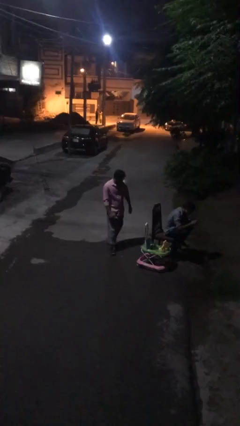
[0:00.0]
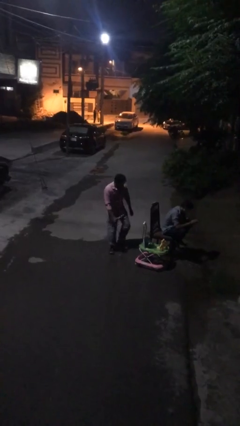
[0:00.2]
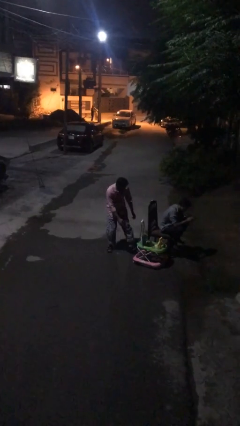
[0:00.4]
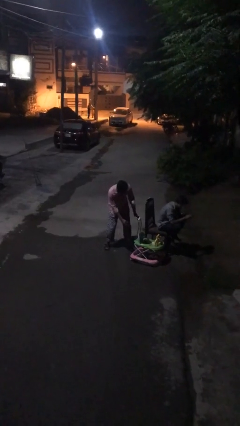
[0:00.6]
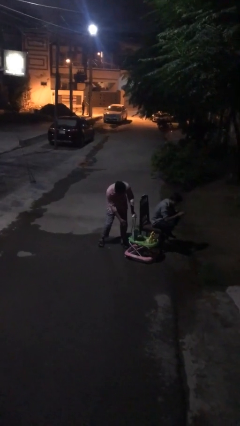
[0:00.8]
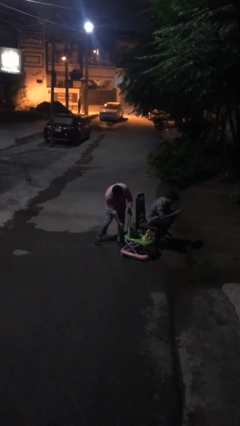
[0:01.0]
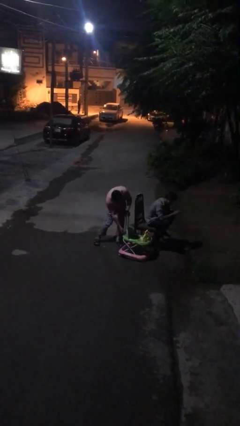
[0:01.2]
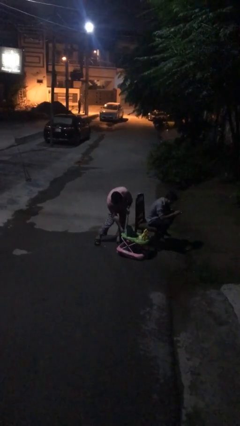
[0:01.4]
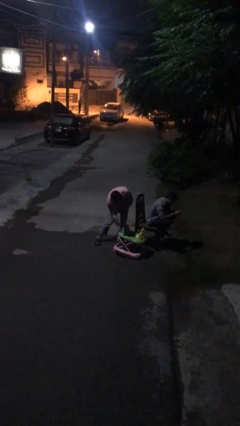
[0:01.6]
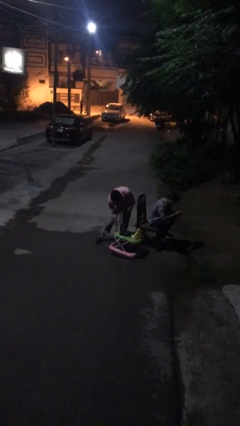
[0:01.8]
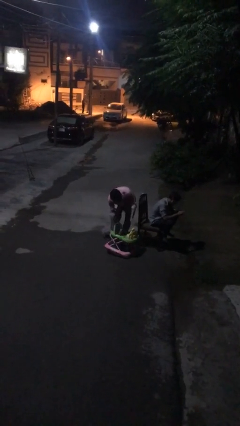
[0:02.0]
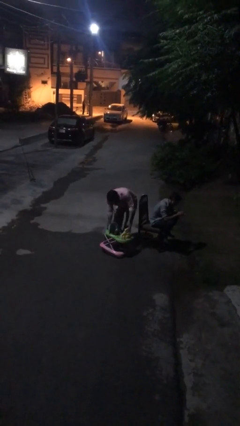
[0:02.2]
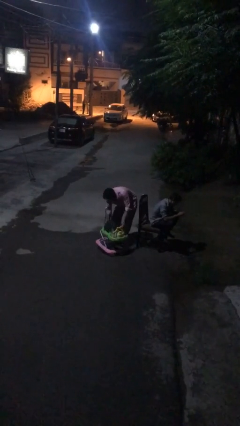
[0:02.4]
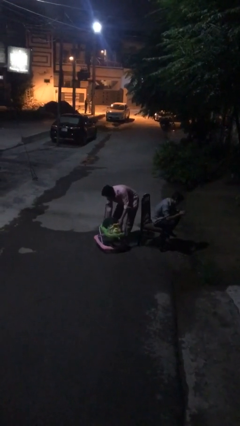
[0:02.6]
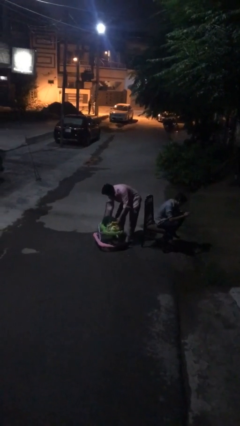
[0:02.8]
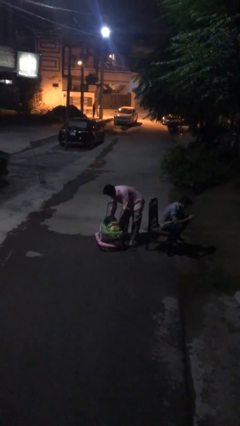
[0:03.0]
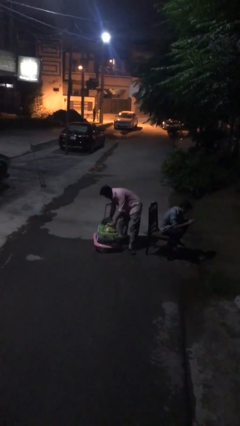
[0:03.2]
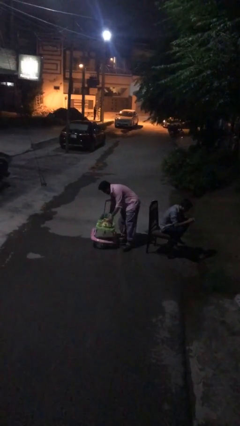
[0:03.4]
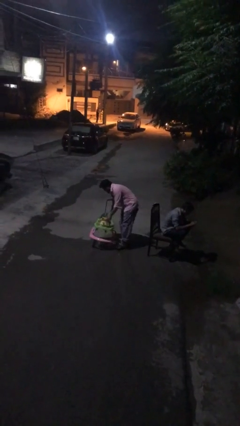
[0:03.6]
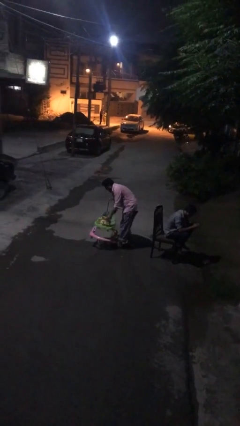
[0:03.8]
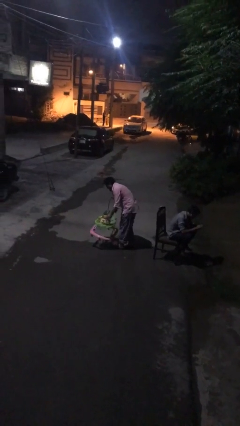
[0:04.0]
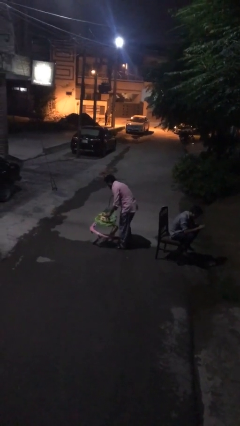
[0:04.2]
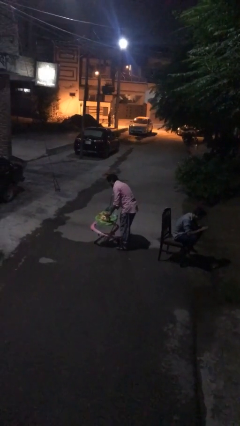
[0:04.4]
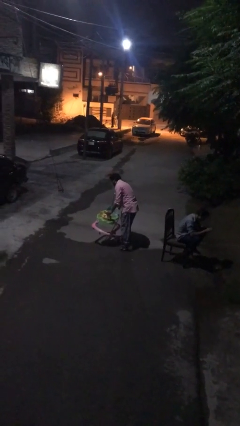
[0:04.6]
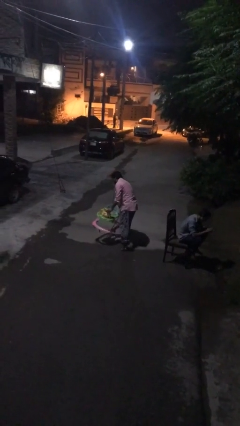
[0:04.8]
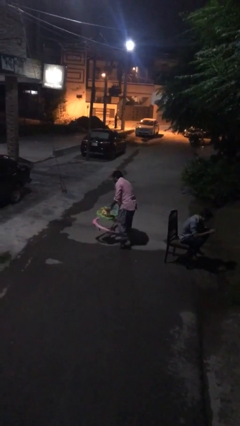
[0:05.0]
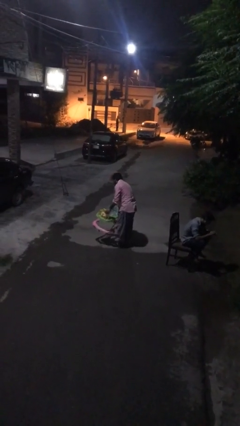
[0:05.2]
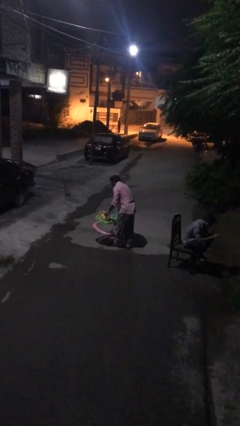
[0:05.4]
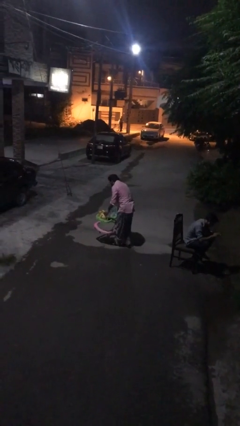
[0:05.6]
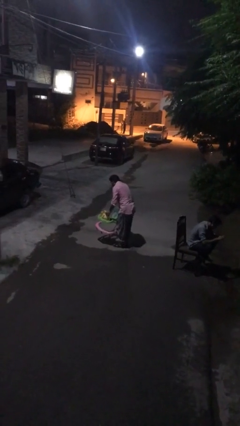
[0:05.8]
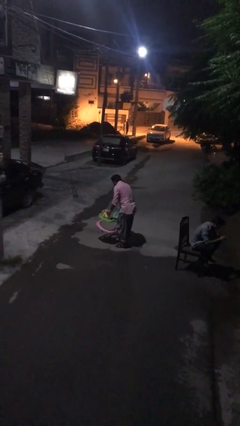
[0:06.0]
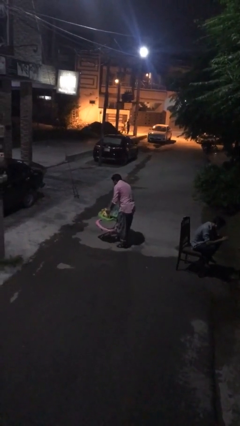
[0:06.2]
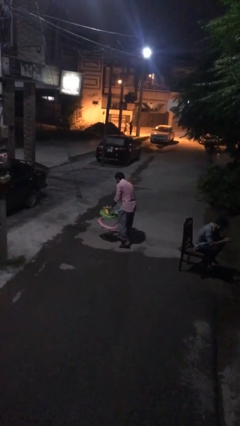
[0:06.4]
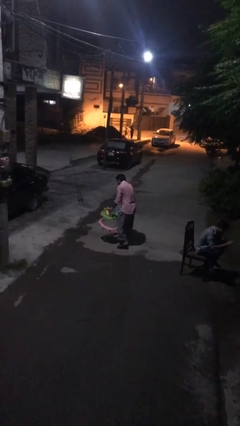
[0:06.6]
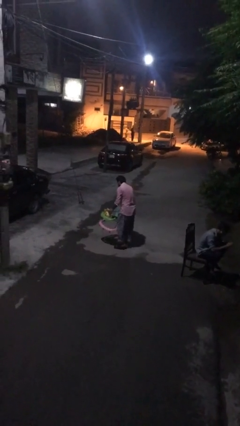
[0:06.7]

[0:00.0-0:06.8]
person steals object from person

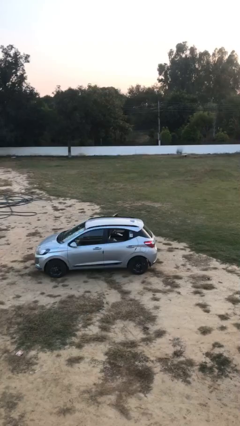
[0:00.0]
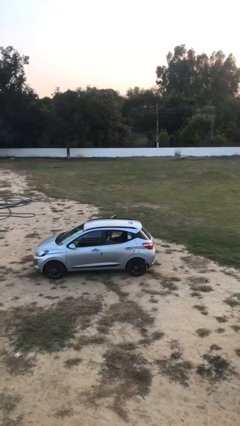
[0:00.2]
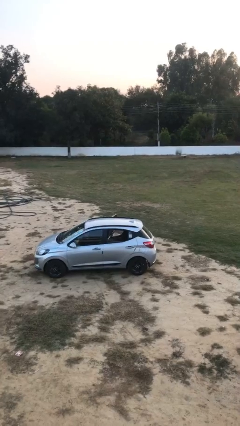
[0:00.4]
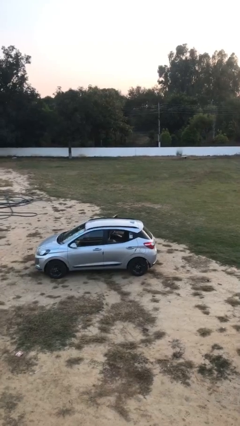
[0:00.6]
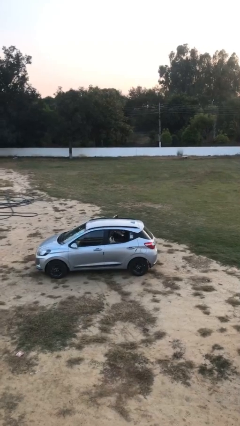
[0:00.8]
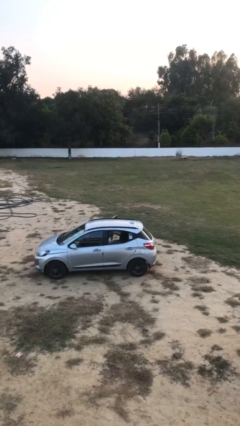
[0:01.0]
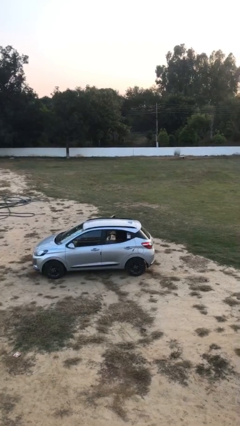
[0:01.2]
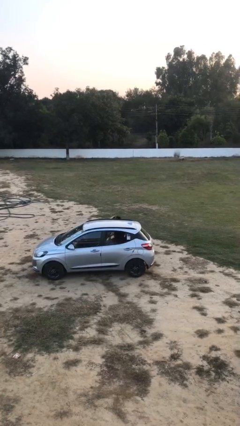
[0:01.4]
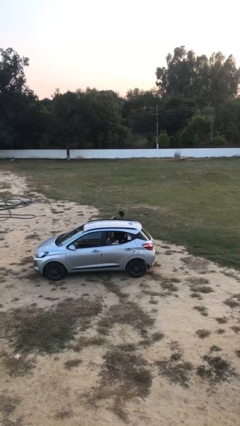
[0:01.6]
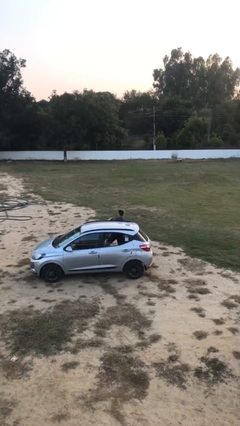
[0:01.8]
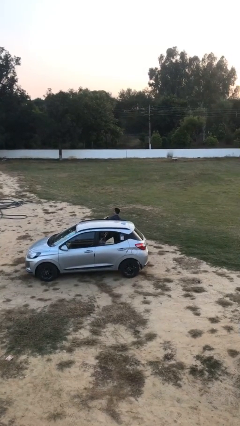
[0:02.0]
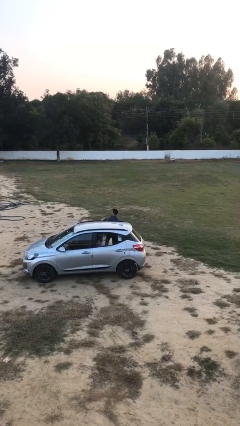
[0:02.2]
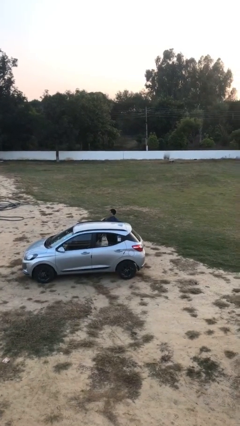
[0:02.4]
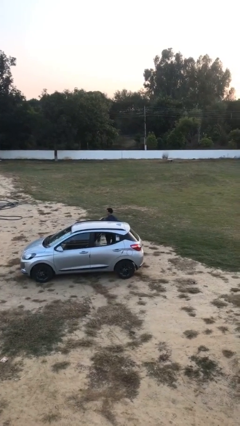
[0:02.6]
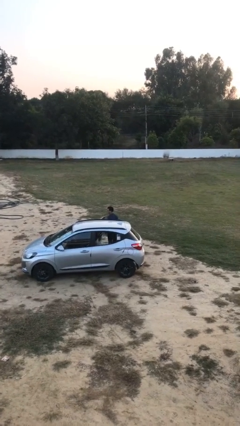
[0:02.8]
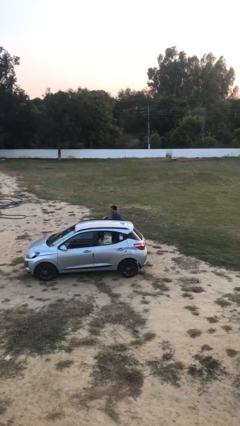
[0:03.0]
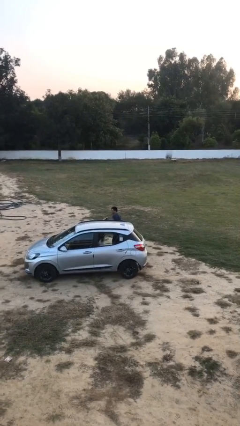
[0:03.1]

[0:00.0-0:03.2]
person exits car

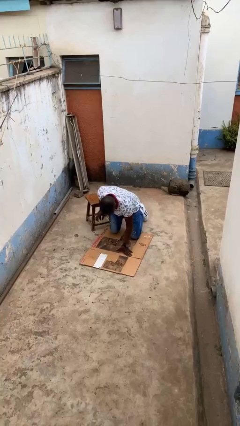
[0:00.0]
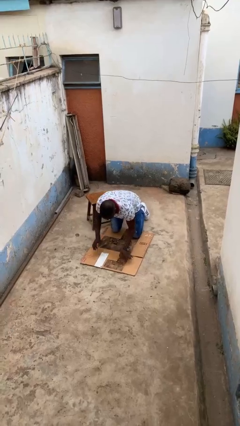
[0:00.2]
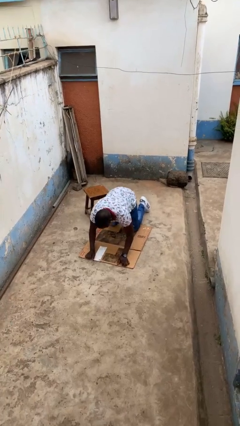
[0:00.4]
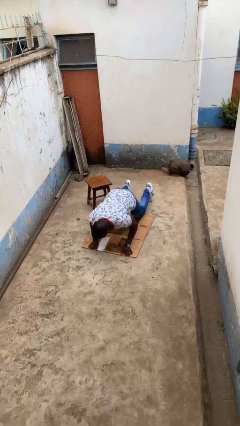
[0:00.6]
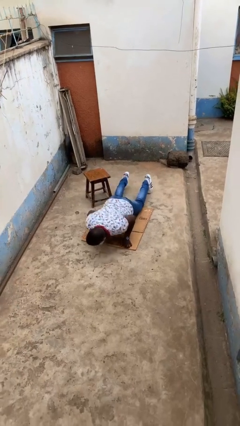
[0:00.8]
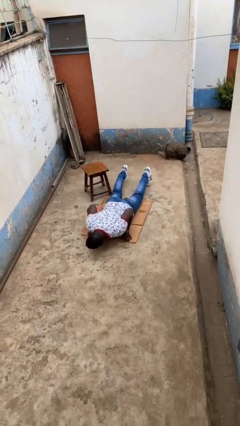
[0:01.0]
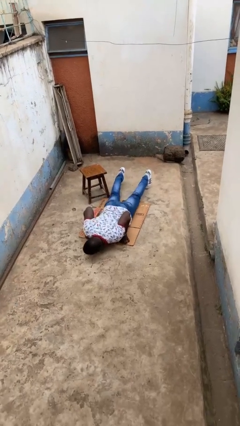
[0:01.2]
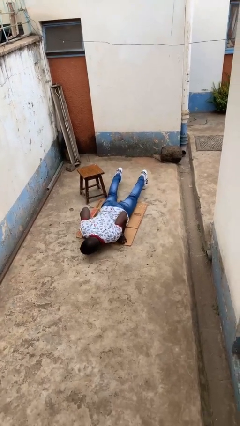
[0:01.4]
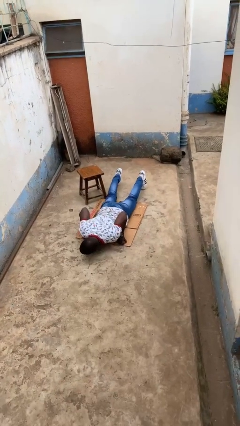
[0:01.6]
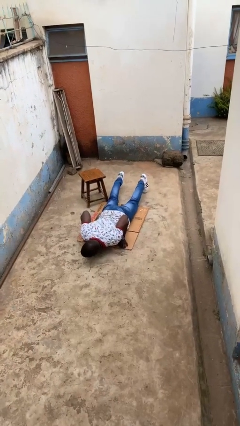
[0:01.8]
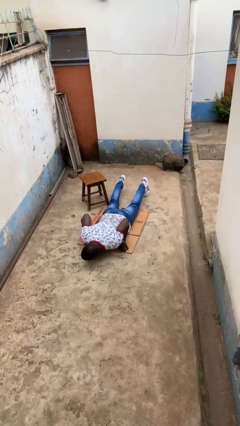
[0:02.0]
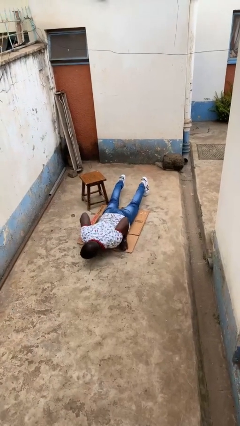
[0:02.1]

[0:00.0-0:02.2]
person lies down on floor

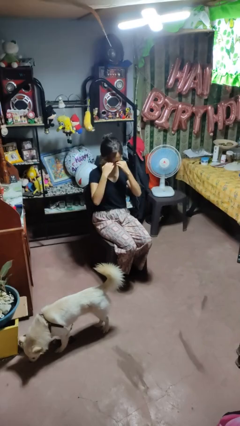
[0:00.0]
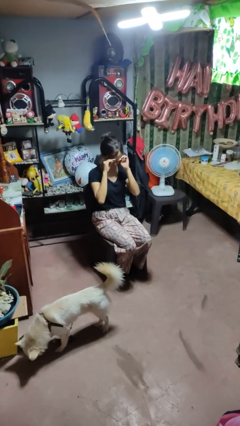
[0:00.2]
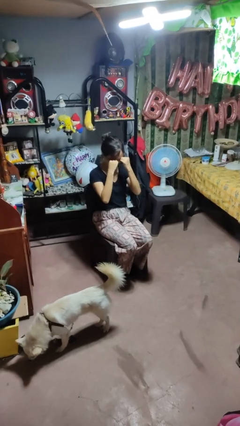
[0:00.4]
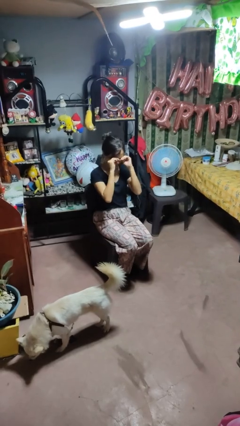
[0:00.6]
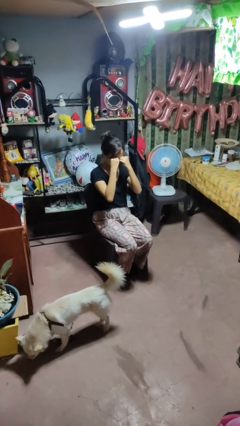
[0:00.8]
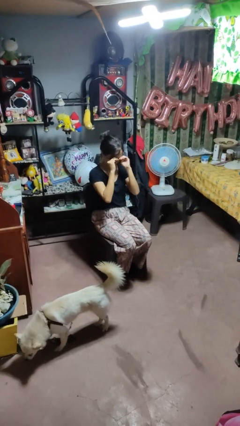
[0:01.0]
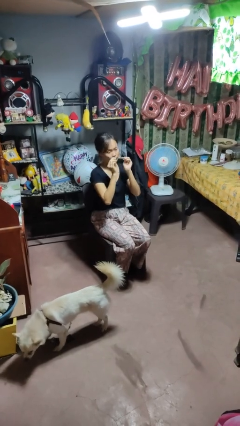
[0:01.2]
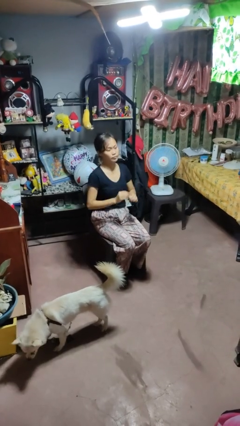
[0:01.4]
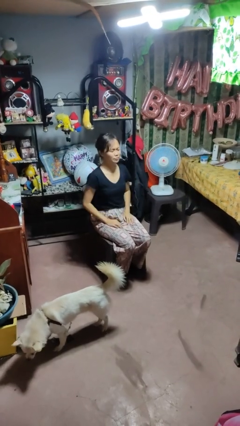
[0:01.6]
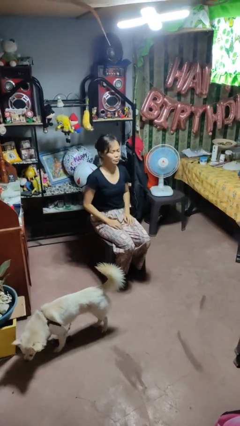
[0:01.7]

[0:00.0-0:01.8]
person rubs eyes

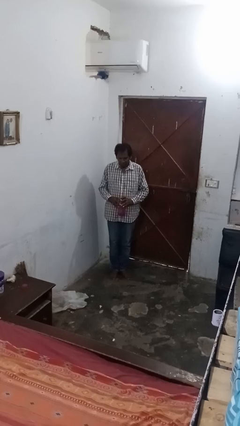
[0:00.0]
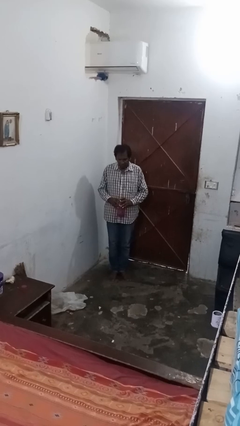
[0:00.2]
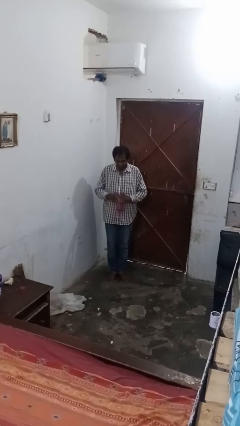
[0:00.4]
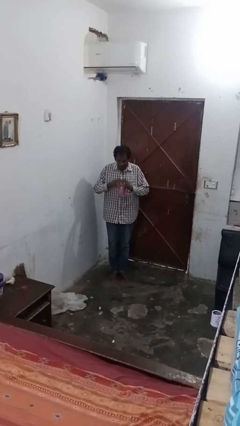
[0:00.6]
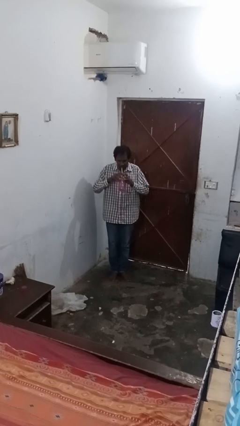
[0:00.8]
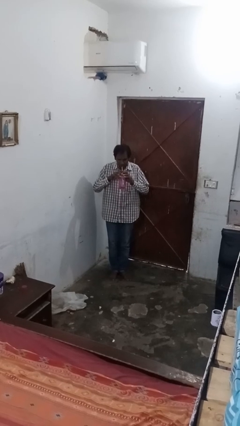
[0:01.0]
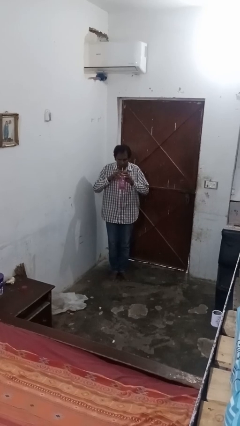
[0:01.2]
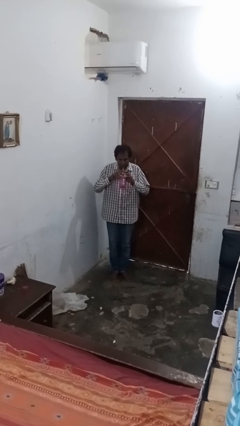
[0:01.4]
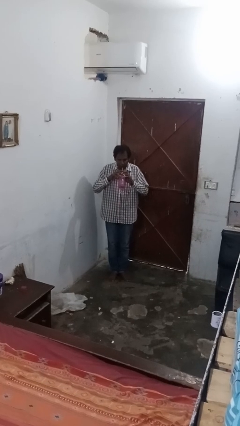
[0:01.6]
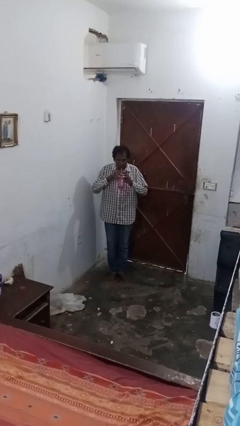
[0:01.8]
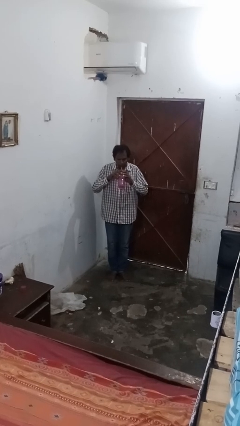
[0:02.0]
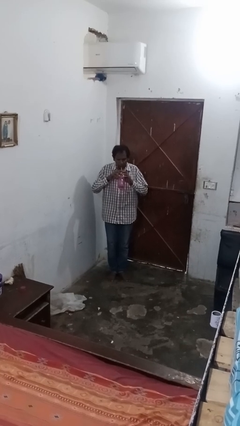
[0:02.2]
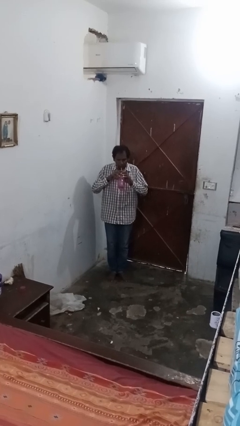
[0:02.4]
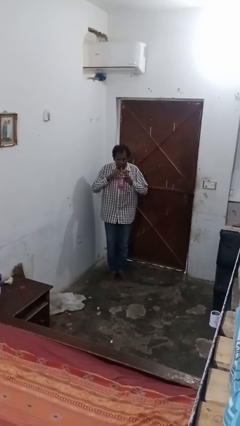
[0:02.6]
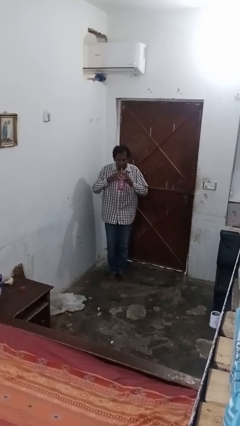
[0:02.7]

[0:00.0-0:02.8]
person drinks from straw
